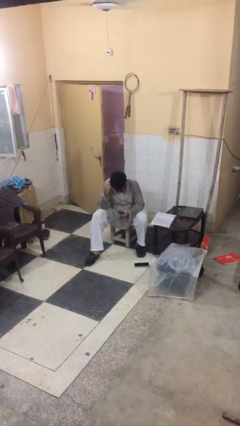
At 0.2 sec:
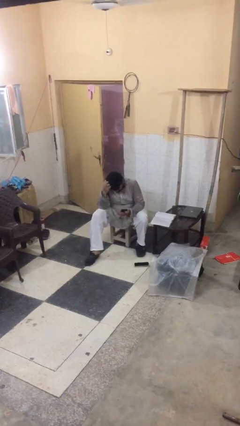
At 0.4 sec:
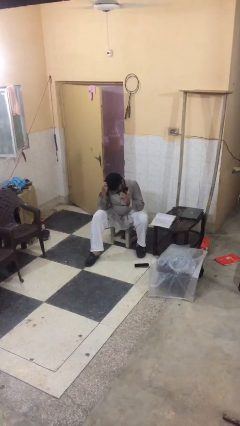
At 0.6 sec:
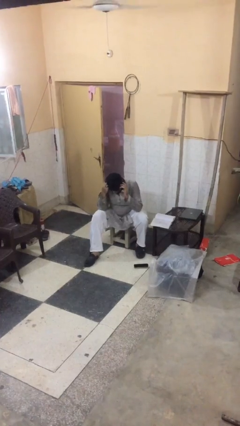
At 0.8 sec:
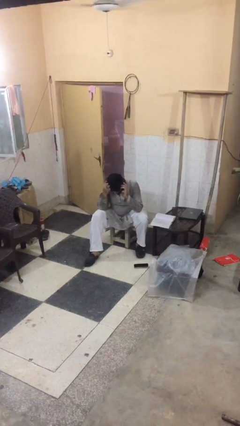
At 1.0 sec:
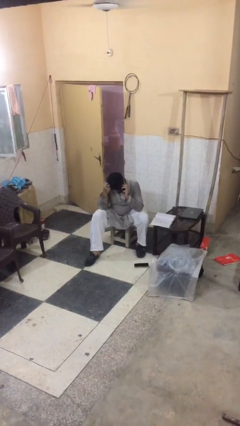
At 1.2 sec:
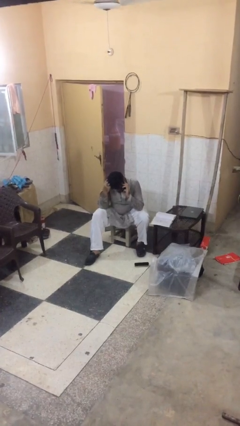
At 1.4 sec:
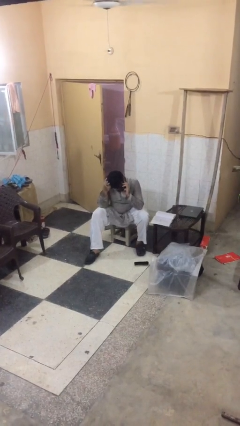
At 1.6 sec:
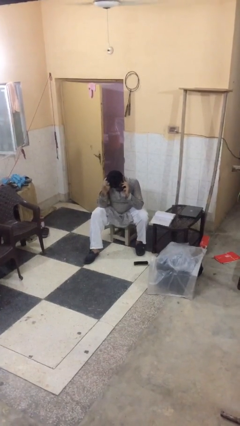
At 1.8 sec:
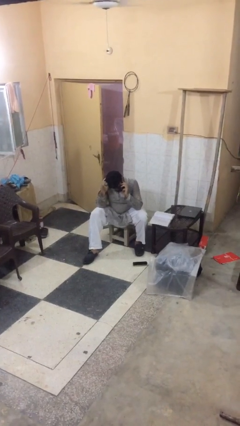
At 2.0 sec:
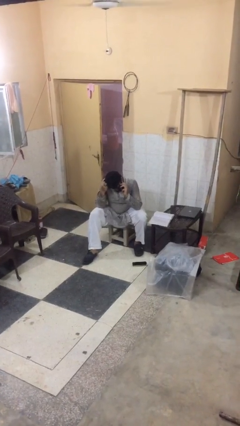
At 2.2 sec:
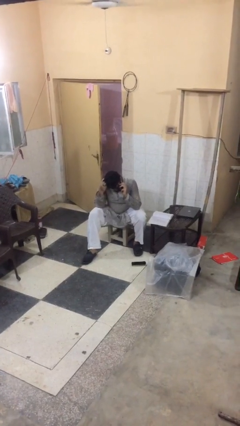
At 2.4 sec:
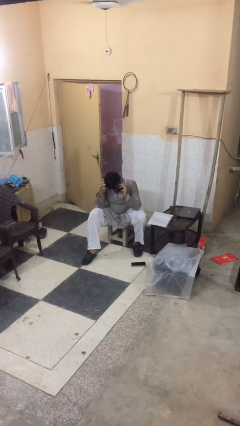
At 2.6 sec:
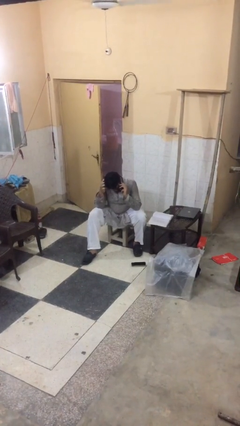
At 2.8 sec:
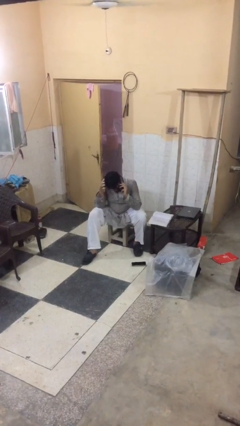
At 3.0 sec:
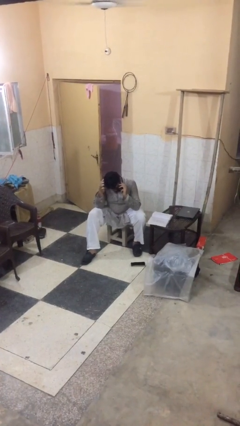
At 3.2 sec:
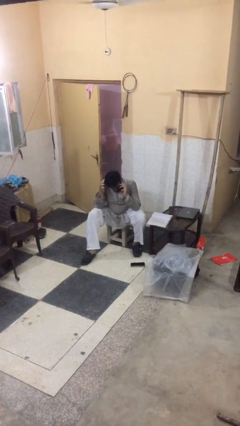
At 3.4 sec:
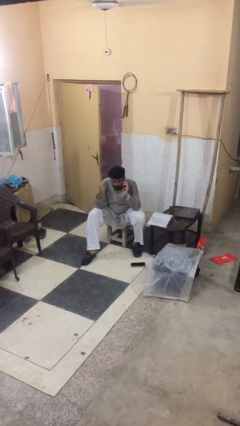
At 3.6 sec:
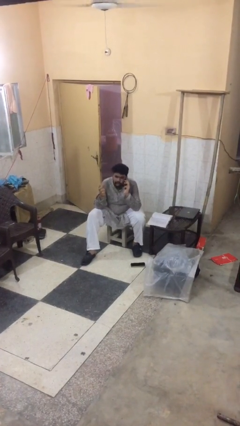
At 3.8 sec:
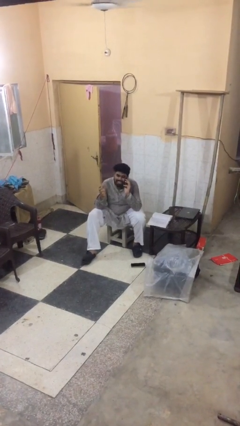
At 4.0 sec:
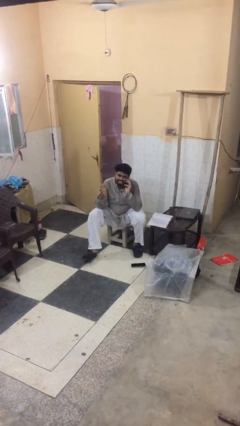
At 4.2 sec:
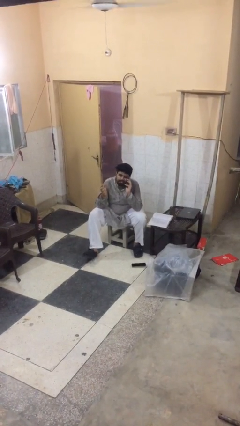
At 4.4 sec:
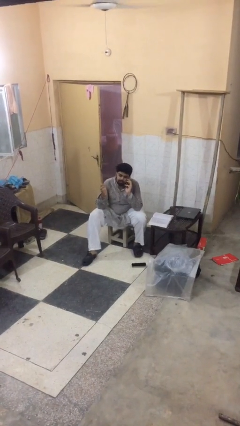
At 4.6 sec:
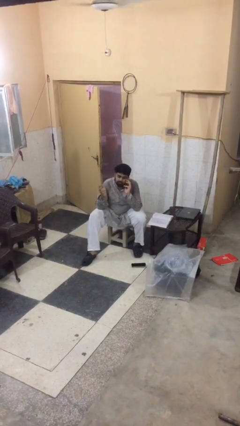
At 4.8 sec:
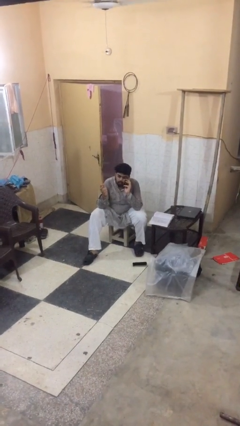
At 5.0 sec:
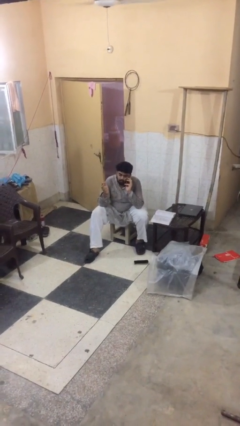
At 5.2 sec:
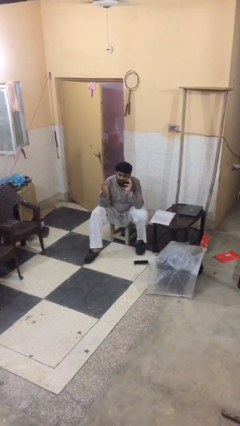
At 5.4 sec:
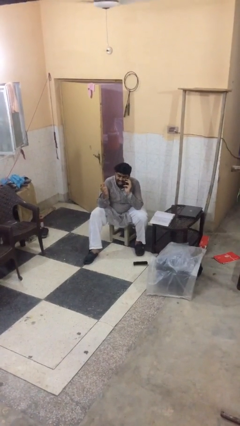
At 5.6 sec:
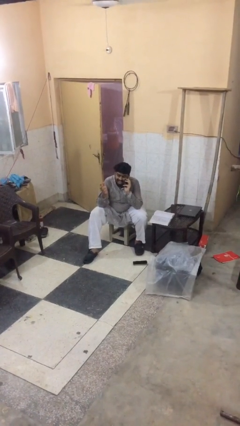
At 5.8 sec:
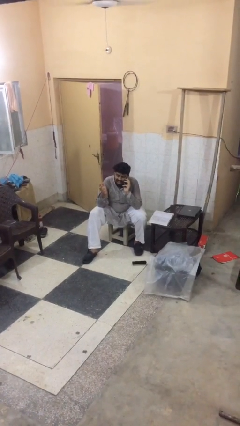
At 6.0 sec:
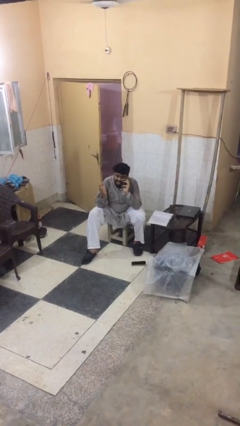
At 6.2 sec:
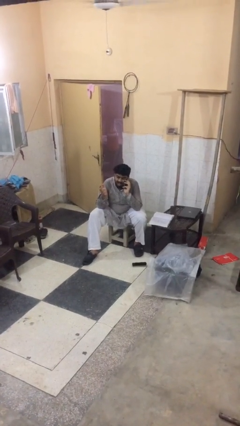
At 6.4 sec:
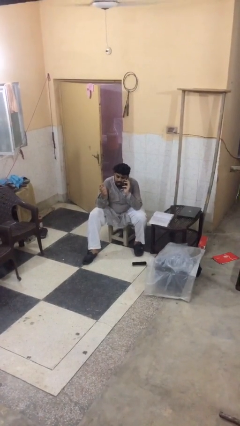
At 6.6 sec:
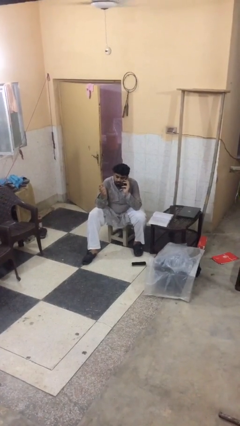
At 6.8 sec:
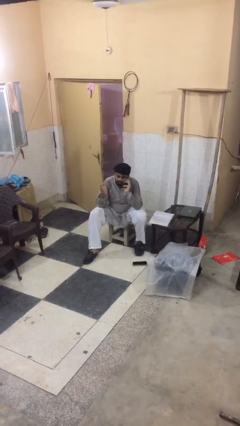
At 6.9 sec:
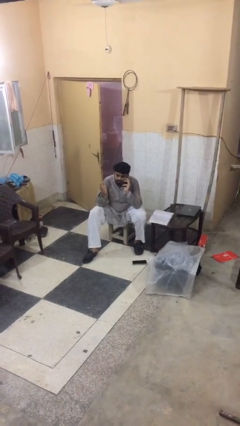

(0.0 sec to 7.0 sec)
person talks on phone

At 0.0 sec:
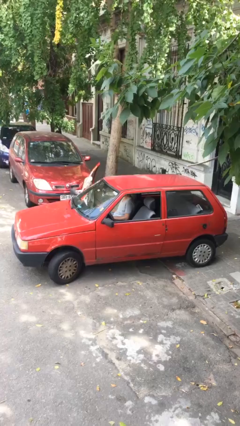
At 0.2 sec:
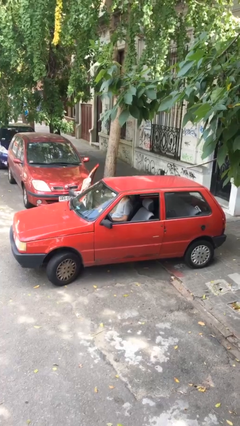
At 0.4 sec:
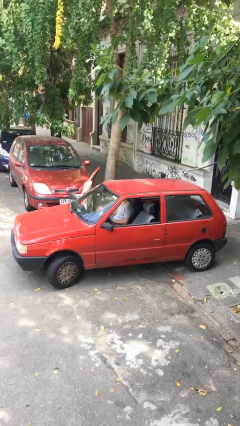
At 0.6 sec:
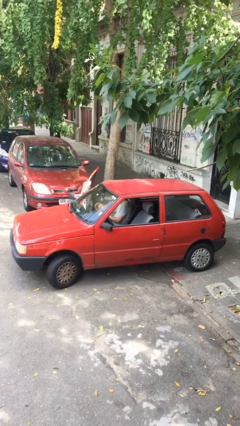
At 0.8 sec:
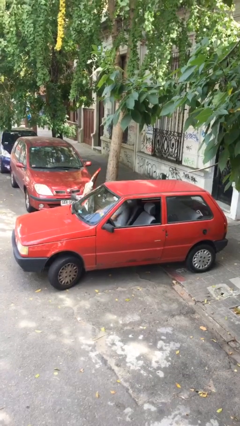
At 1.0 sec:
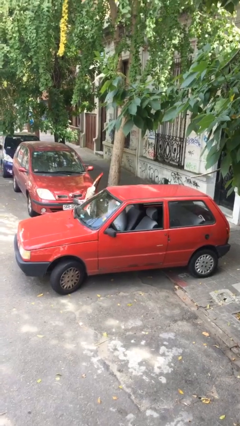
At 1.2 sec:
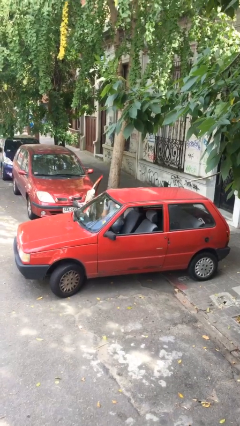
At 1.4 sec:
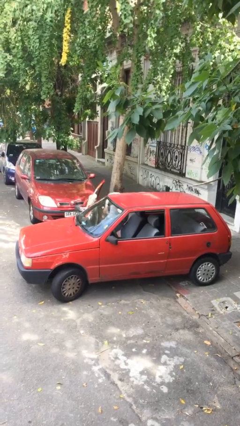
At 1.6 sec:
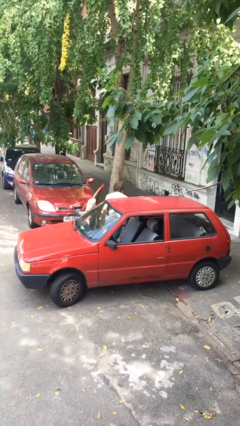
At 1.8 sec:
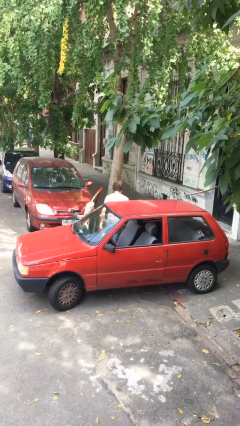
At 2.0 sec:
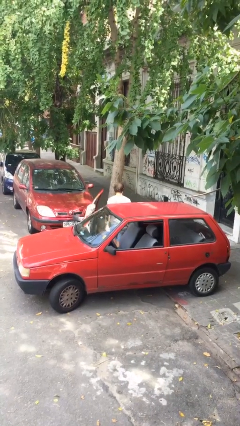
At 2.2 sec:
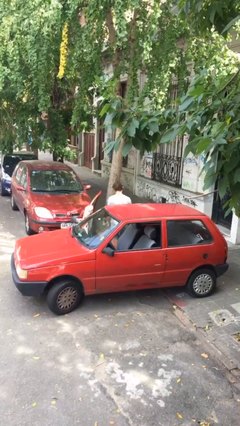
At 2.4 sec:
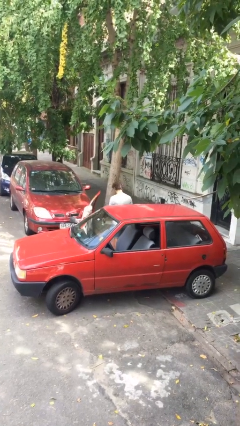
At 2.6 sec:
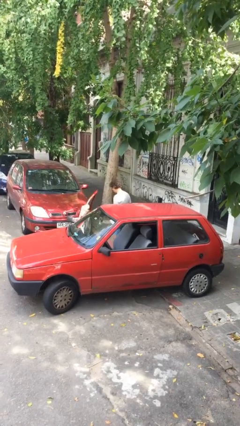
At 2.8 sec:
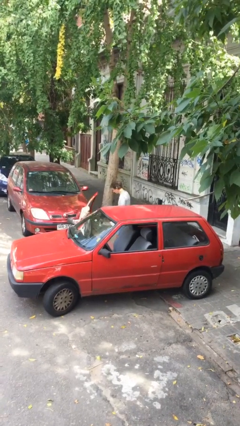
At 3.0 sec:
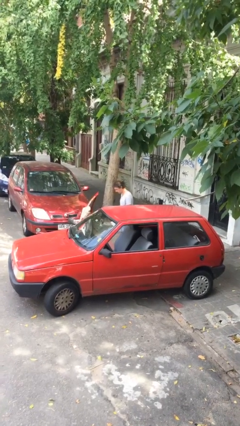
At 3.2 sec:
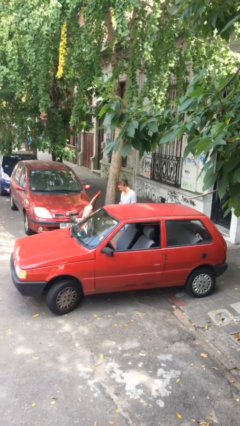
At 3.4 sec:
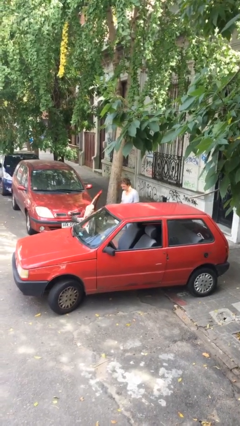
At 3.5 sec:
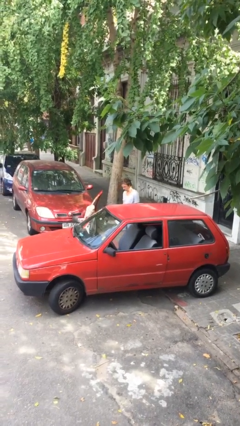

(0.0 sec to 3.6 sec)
person exits car

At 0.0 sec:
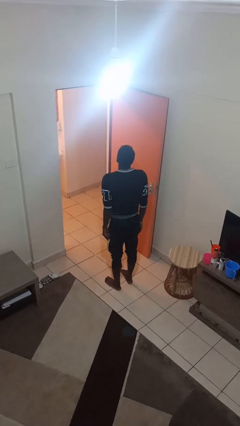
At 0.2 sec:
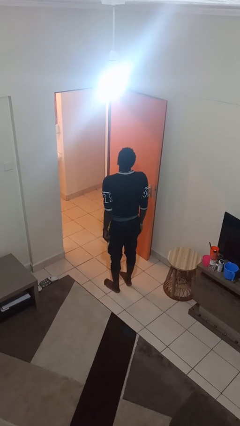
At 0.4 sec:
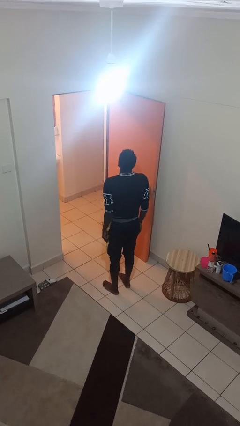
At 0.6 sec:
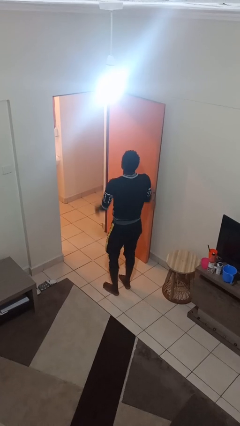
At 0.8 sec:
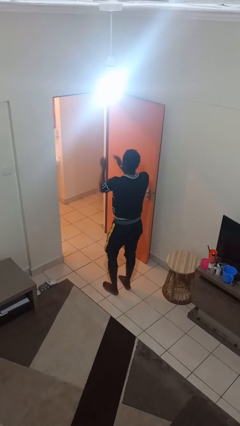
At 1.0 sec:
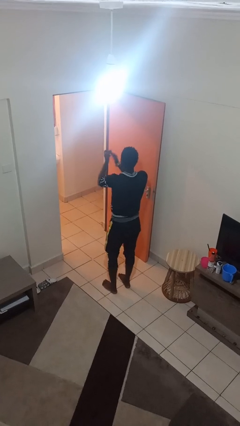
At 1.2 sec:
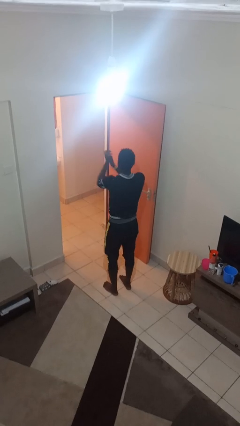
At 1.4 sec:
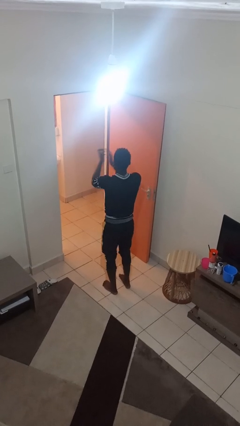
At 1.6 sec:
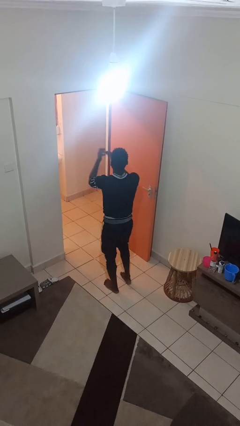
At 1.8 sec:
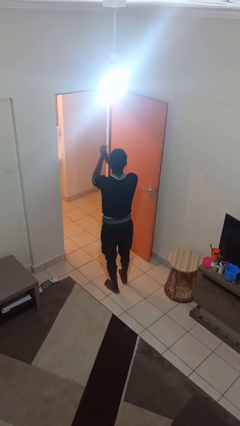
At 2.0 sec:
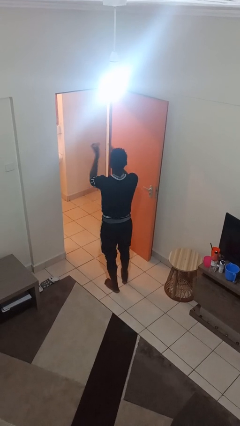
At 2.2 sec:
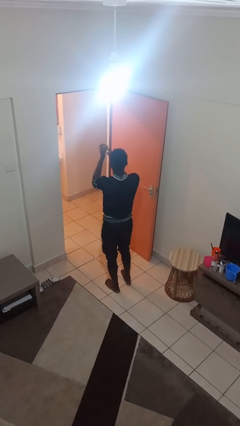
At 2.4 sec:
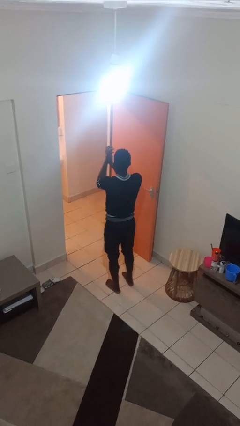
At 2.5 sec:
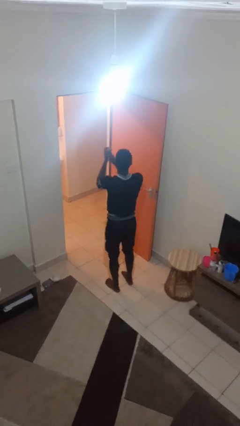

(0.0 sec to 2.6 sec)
person claps hands

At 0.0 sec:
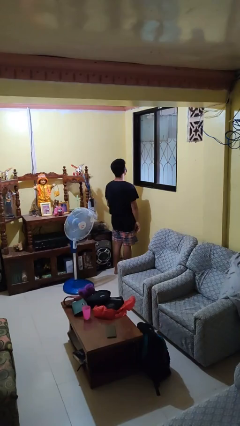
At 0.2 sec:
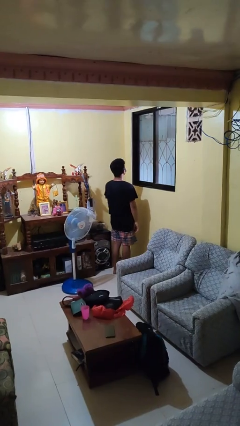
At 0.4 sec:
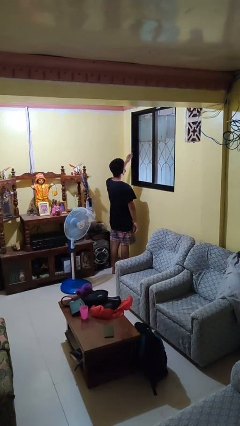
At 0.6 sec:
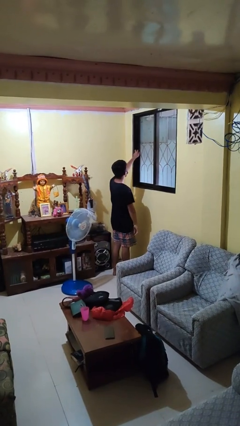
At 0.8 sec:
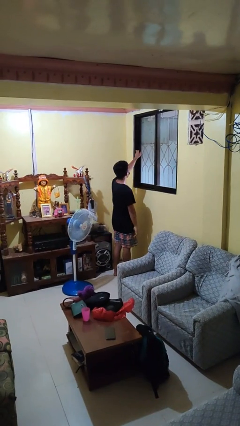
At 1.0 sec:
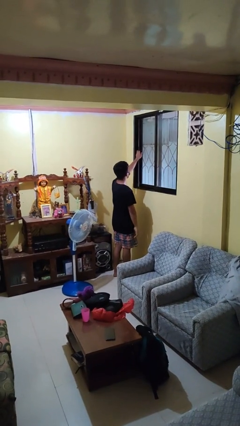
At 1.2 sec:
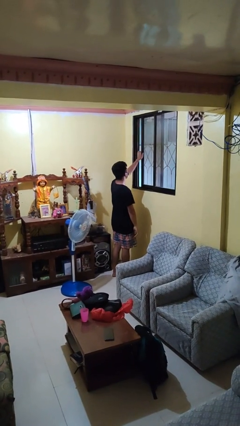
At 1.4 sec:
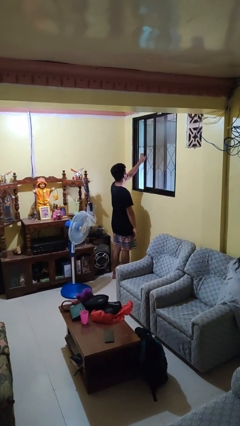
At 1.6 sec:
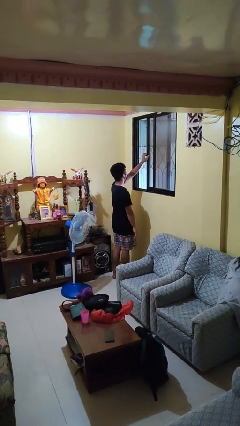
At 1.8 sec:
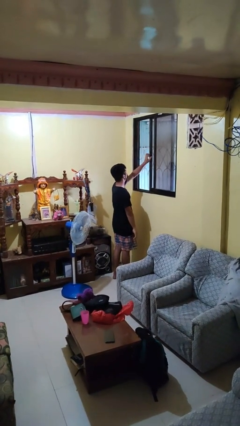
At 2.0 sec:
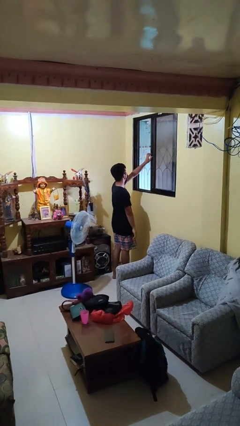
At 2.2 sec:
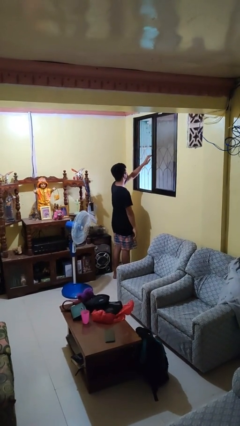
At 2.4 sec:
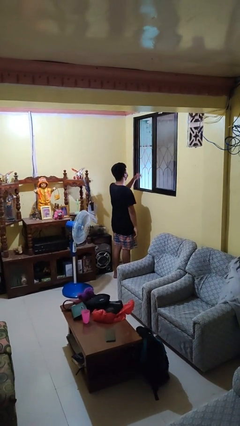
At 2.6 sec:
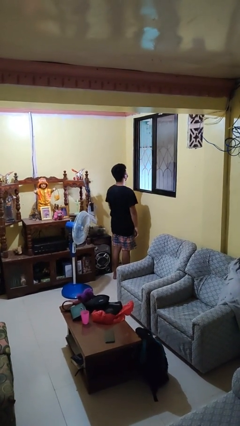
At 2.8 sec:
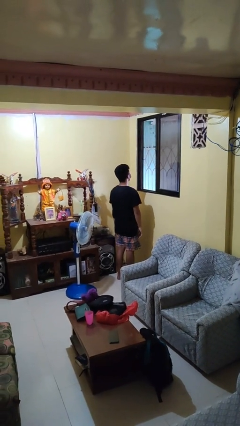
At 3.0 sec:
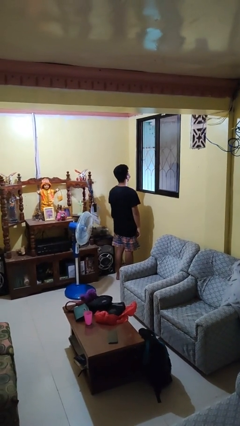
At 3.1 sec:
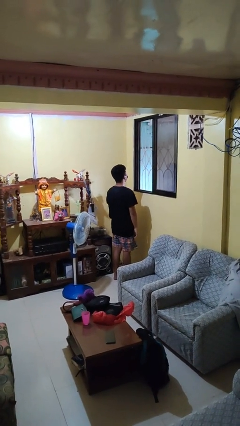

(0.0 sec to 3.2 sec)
person opens home window

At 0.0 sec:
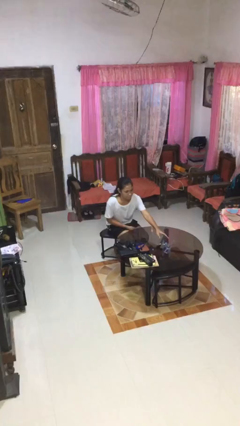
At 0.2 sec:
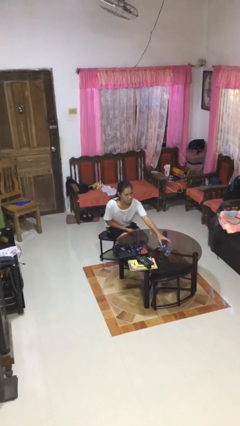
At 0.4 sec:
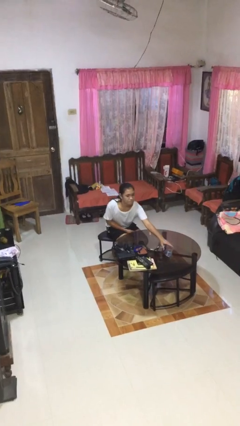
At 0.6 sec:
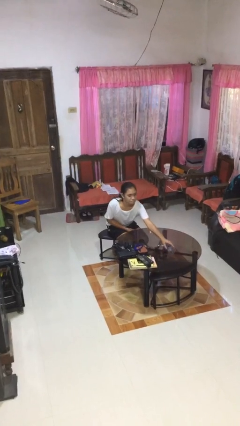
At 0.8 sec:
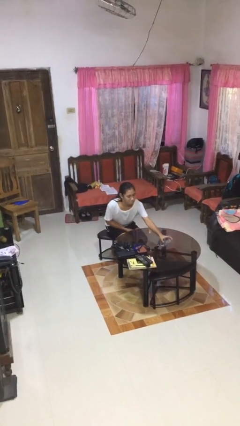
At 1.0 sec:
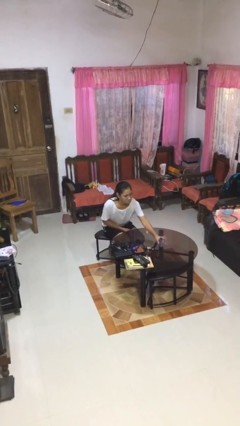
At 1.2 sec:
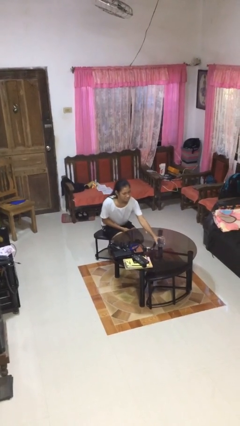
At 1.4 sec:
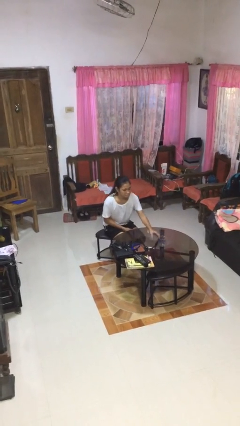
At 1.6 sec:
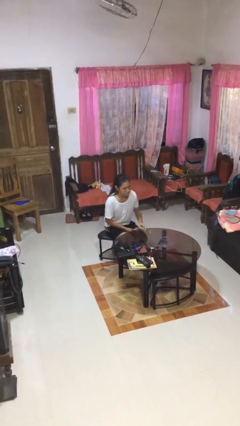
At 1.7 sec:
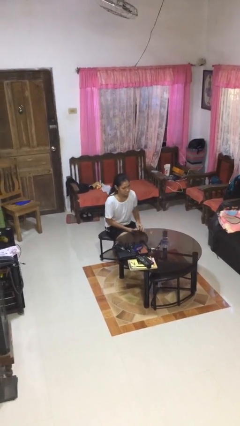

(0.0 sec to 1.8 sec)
person sets upright glass
